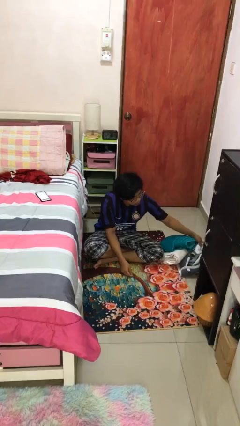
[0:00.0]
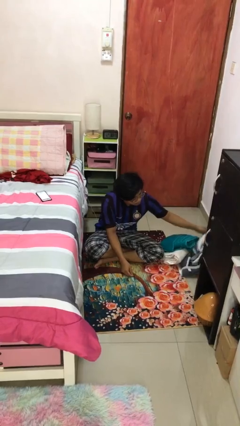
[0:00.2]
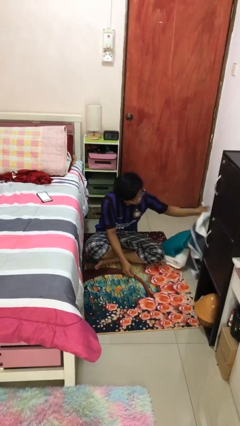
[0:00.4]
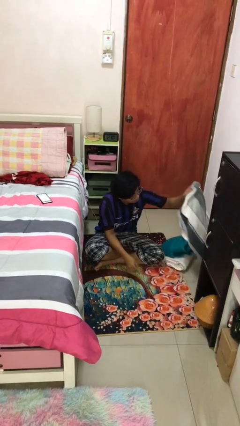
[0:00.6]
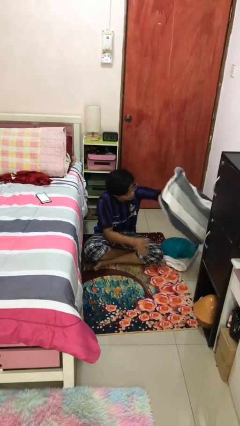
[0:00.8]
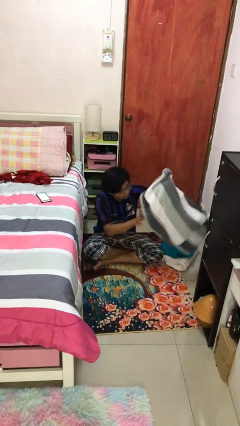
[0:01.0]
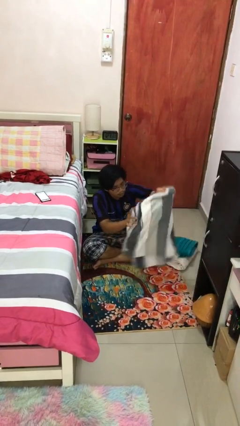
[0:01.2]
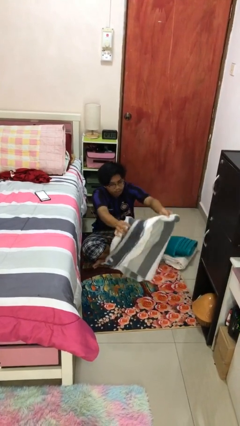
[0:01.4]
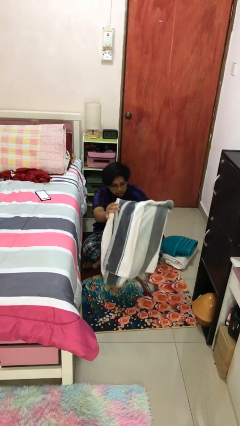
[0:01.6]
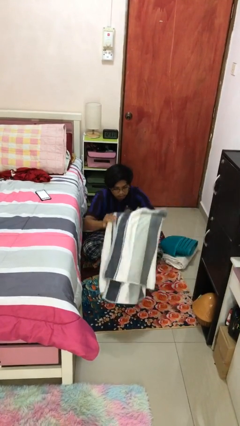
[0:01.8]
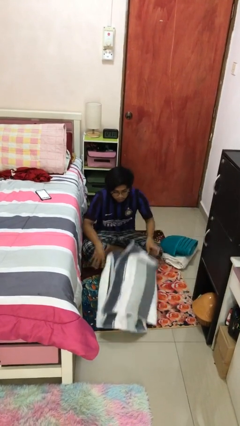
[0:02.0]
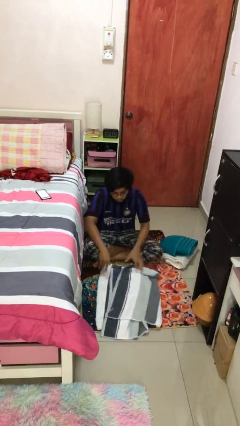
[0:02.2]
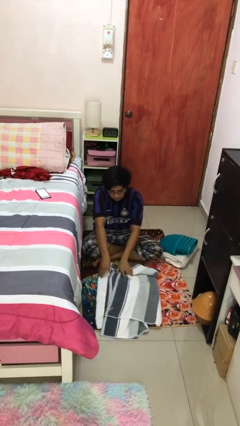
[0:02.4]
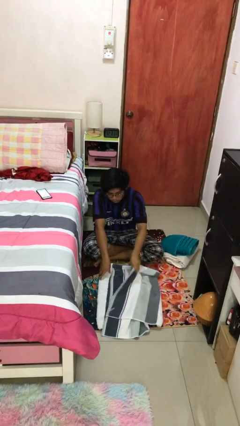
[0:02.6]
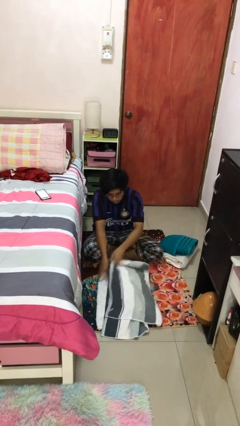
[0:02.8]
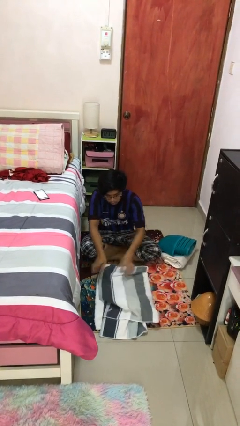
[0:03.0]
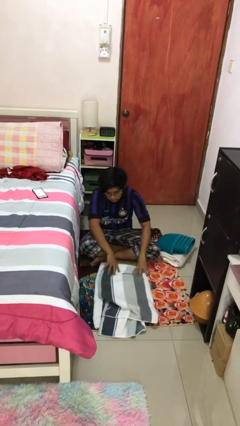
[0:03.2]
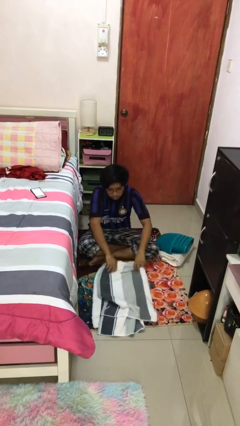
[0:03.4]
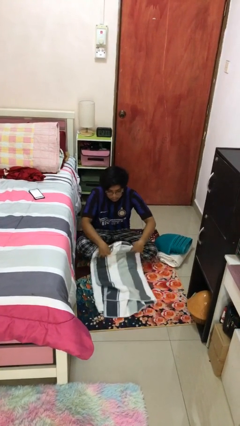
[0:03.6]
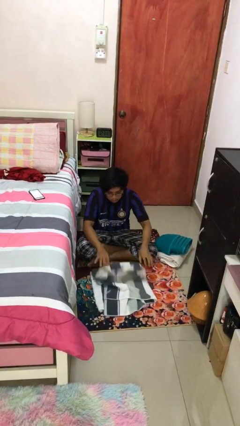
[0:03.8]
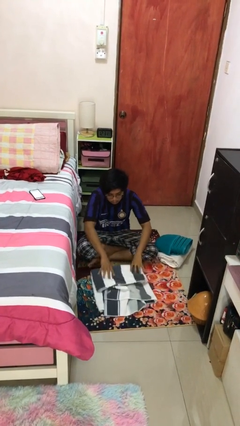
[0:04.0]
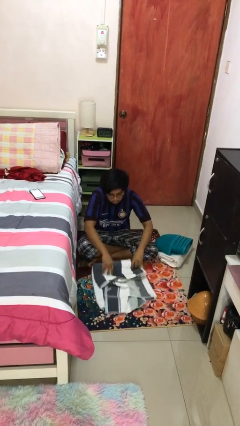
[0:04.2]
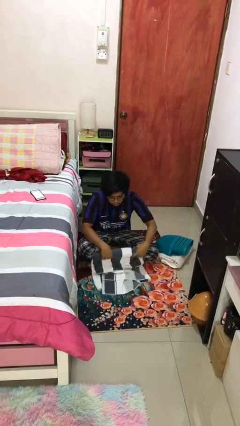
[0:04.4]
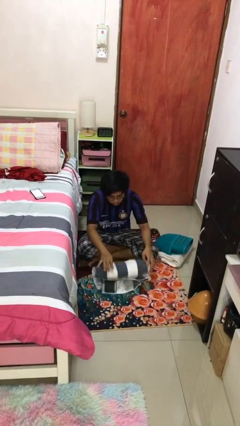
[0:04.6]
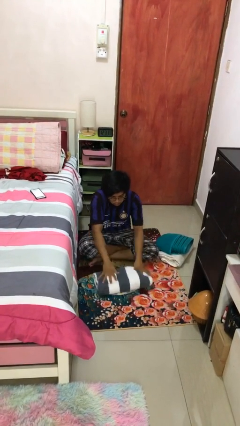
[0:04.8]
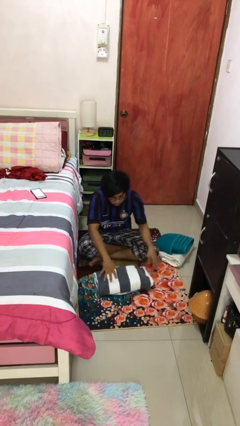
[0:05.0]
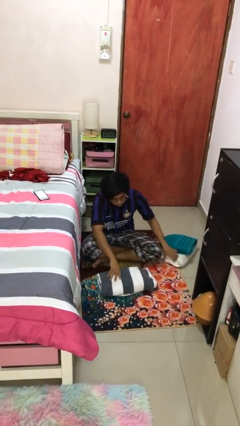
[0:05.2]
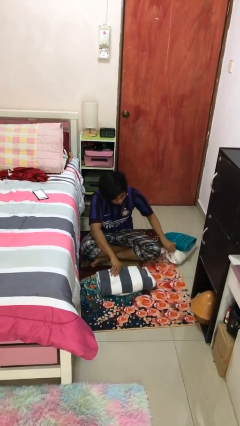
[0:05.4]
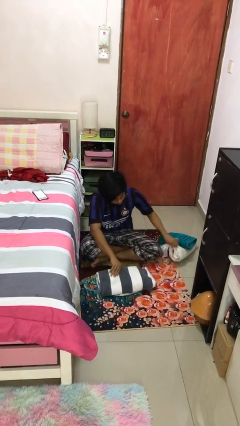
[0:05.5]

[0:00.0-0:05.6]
person folds towel

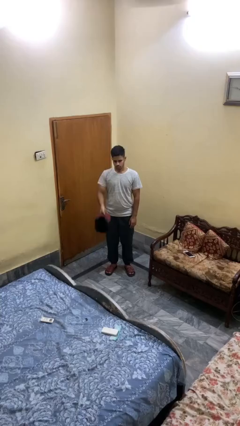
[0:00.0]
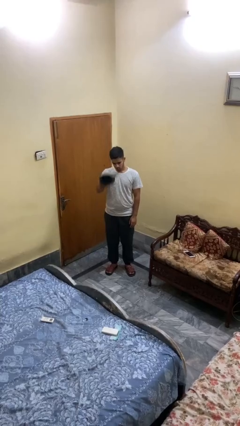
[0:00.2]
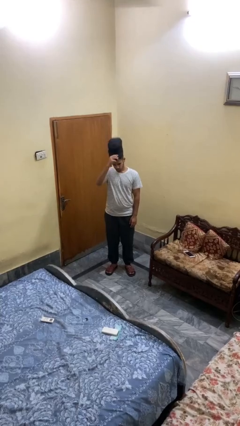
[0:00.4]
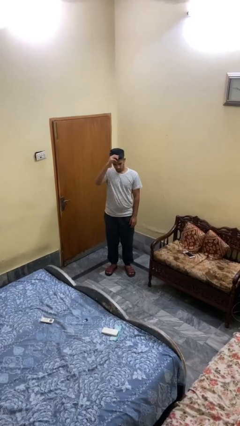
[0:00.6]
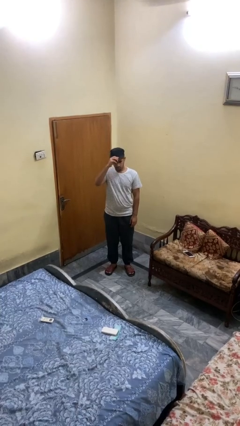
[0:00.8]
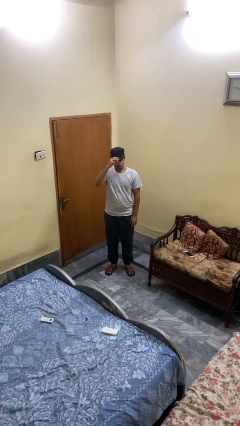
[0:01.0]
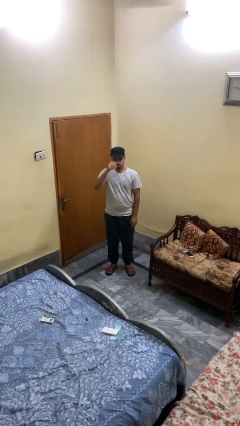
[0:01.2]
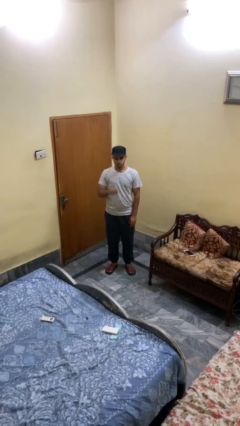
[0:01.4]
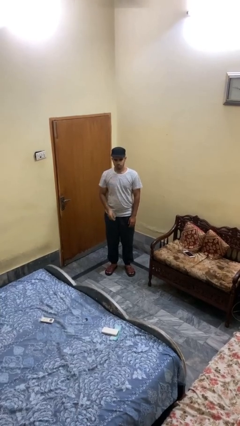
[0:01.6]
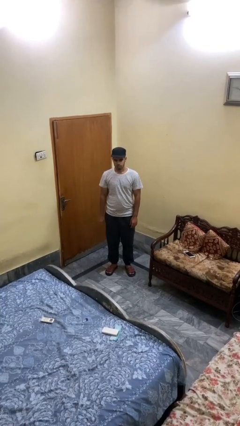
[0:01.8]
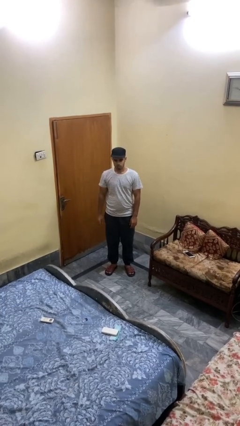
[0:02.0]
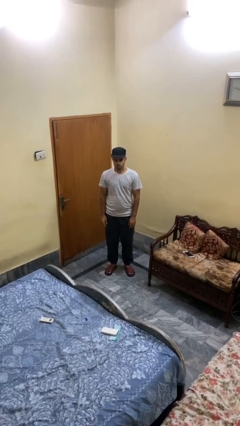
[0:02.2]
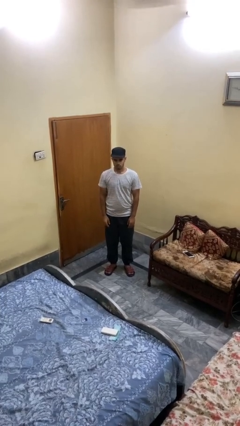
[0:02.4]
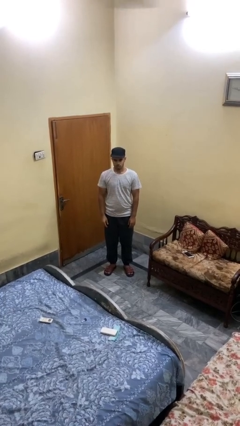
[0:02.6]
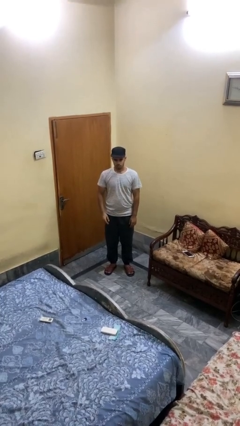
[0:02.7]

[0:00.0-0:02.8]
person puts on hat

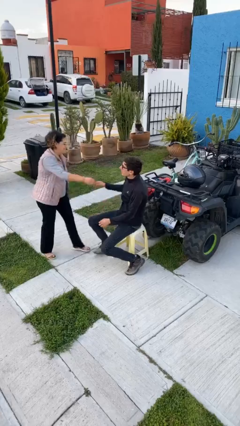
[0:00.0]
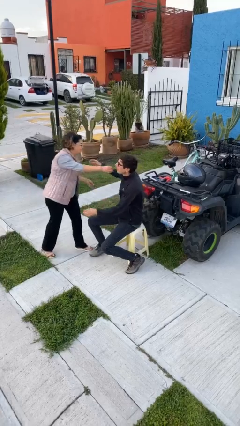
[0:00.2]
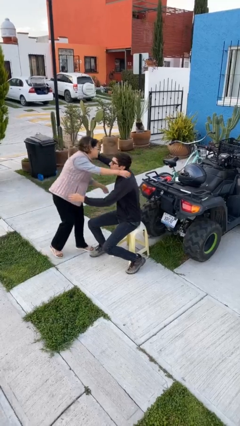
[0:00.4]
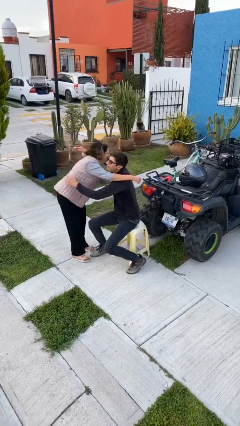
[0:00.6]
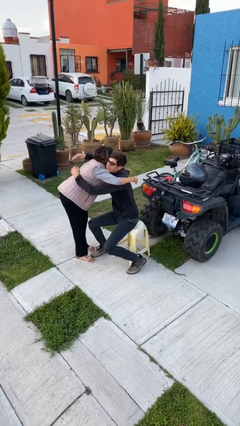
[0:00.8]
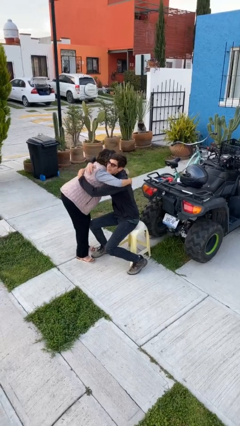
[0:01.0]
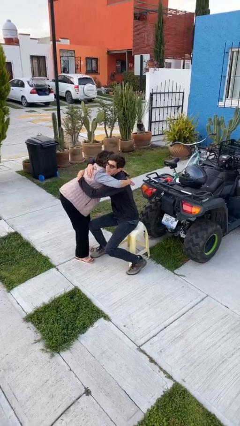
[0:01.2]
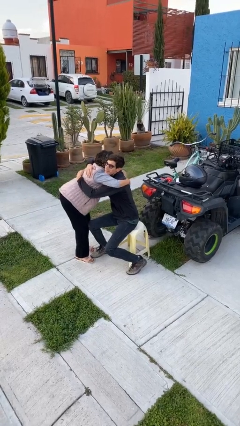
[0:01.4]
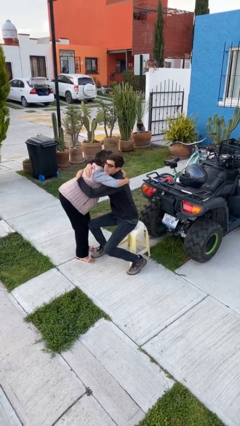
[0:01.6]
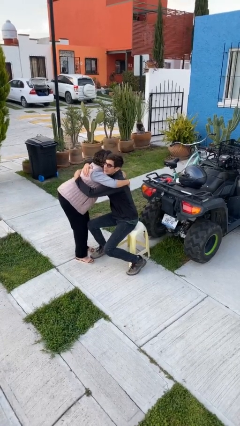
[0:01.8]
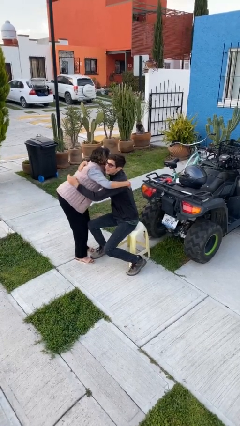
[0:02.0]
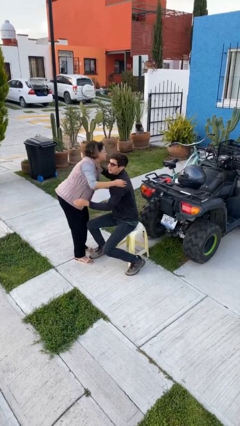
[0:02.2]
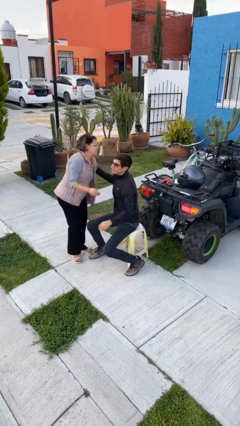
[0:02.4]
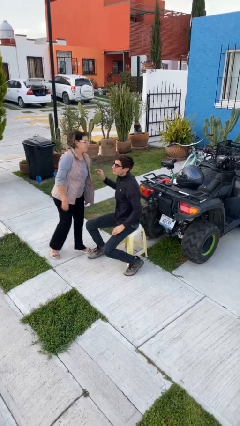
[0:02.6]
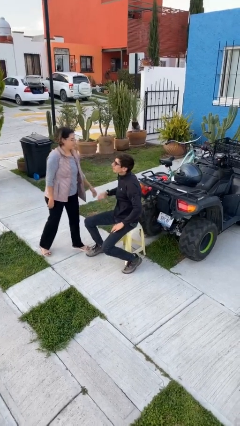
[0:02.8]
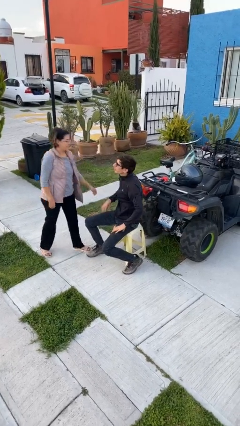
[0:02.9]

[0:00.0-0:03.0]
person embraces person

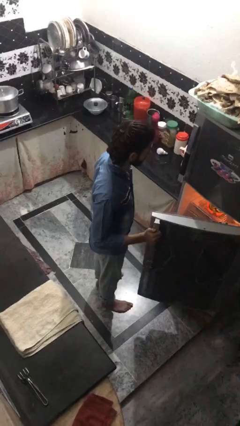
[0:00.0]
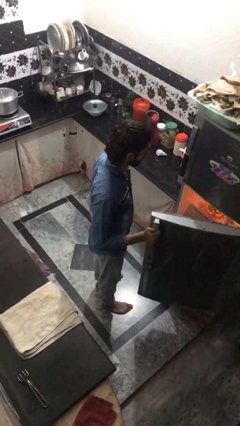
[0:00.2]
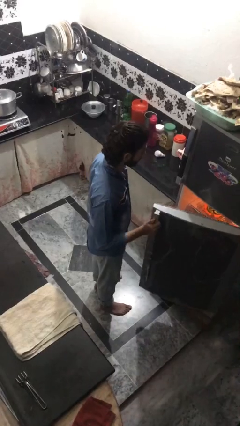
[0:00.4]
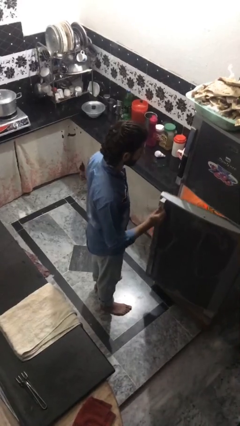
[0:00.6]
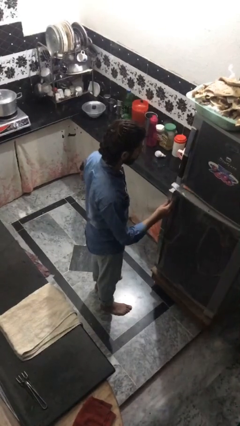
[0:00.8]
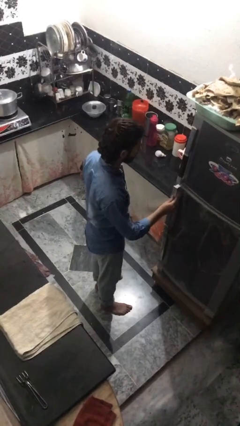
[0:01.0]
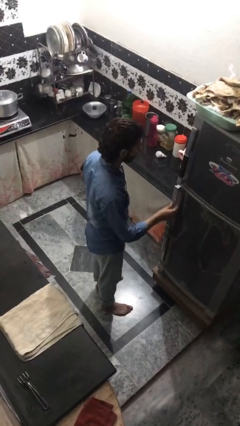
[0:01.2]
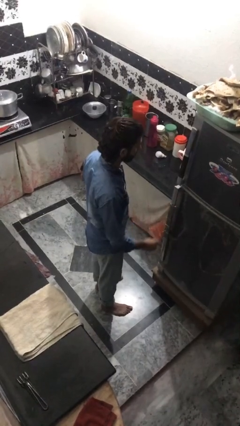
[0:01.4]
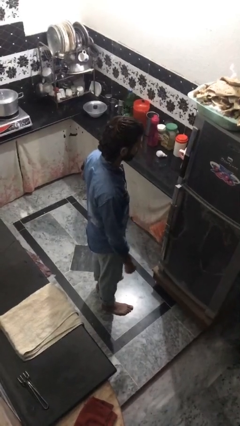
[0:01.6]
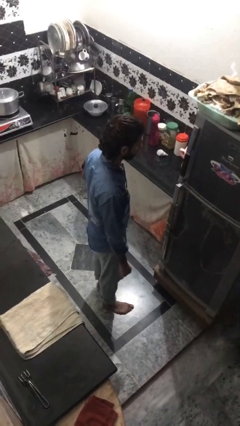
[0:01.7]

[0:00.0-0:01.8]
person closes refrigerator

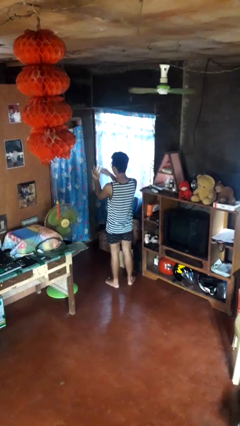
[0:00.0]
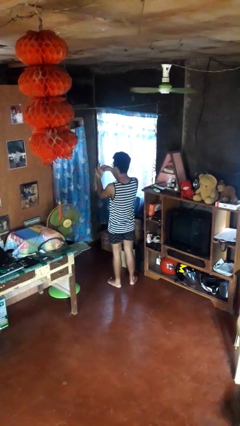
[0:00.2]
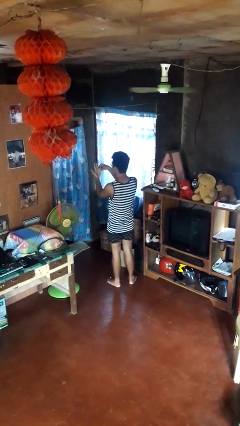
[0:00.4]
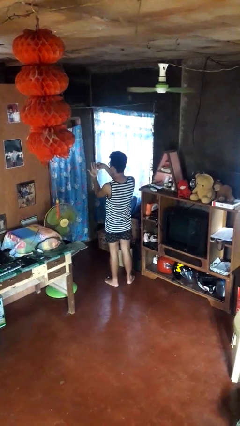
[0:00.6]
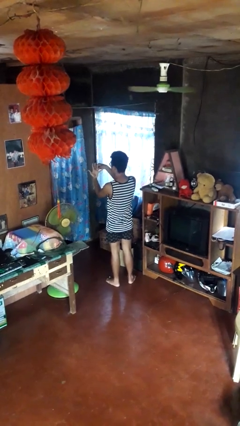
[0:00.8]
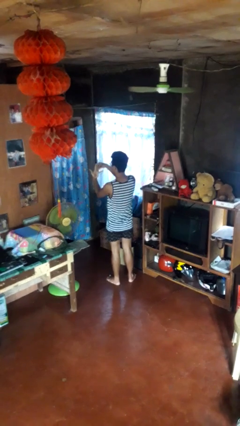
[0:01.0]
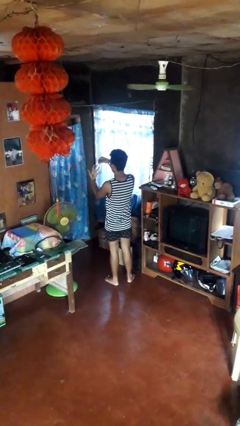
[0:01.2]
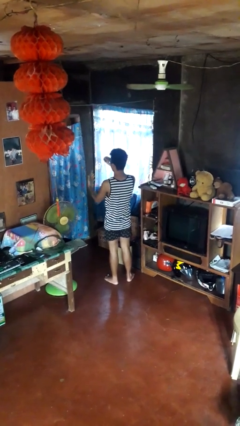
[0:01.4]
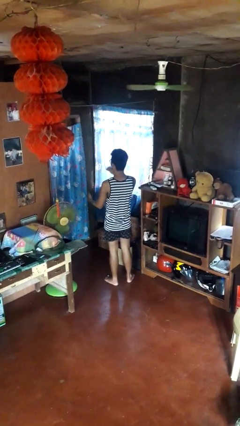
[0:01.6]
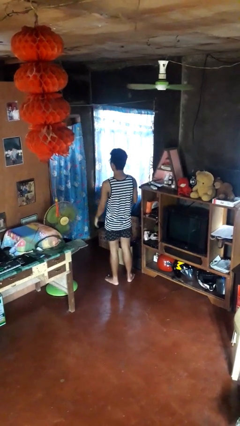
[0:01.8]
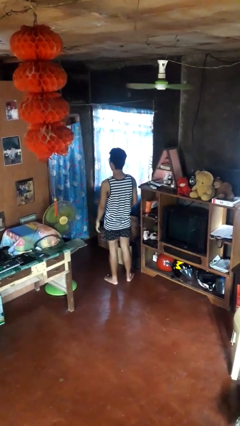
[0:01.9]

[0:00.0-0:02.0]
person takes off ring

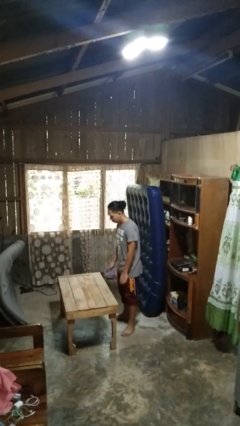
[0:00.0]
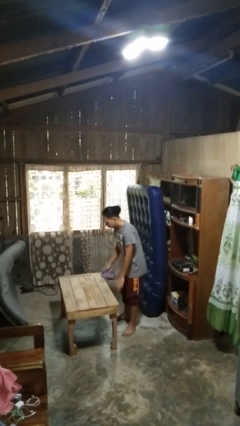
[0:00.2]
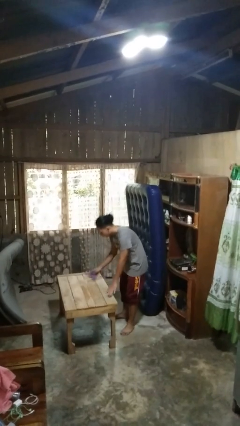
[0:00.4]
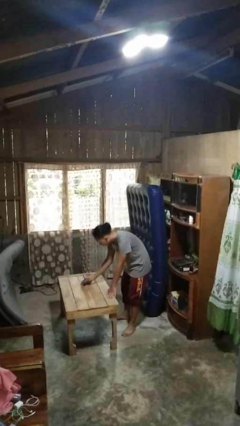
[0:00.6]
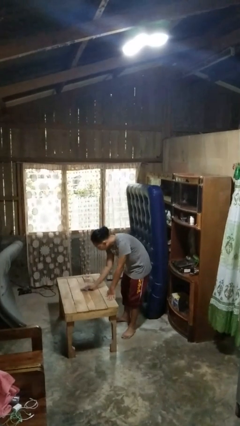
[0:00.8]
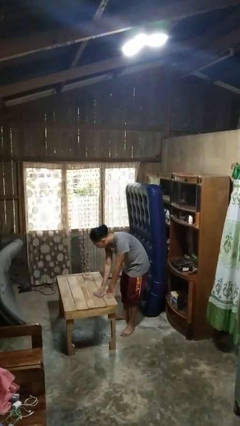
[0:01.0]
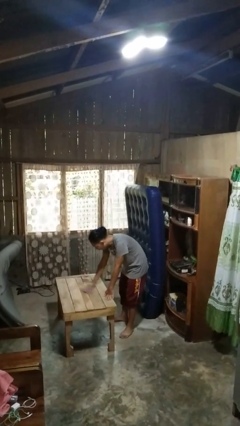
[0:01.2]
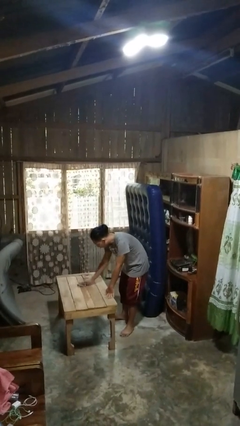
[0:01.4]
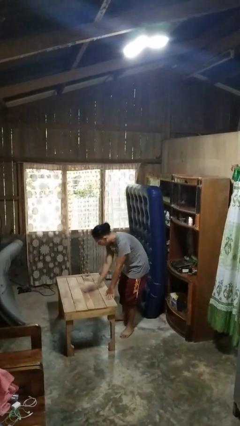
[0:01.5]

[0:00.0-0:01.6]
person cleans table with rag

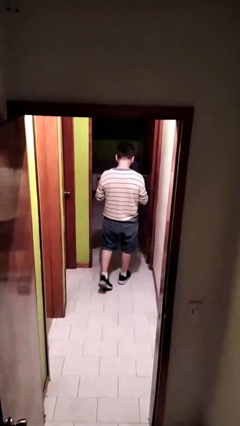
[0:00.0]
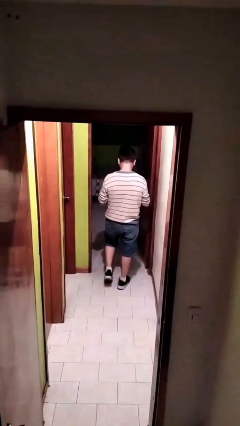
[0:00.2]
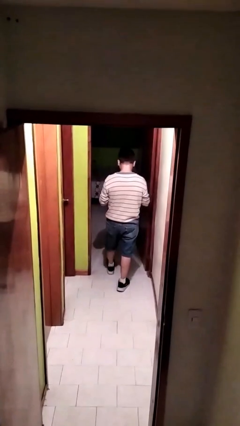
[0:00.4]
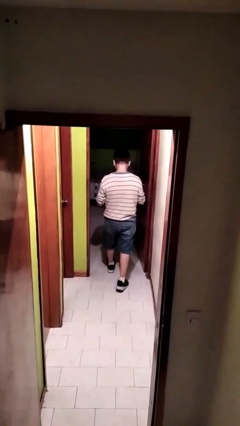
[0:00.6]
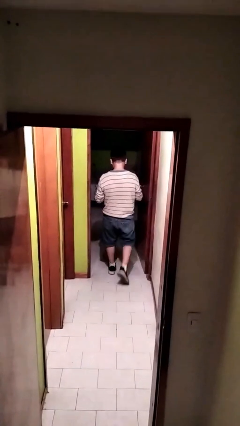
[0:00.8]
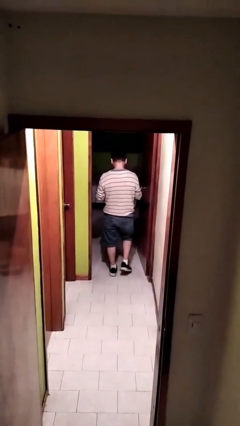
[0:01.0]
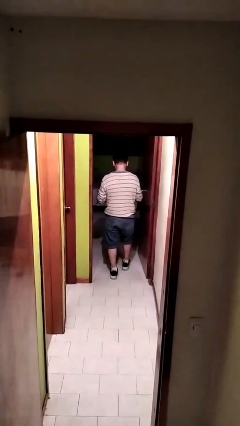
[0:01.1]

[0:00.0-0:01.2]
person exits scene through structure
